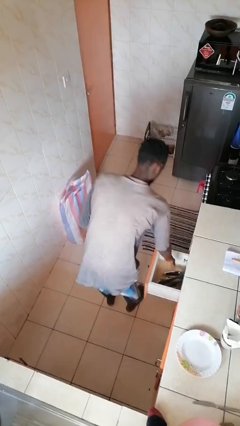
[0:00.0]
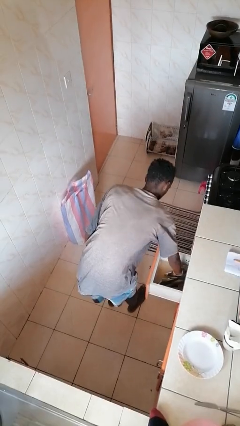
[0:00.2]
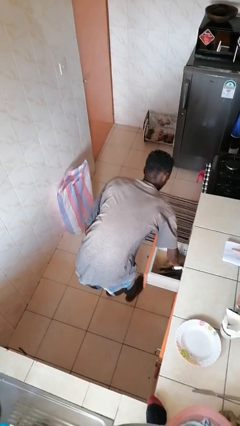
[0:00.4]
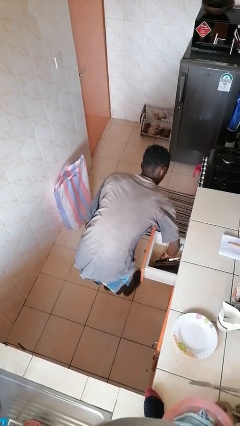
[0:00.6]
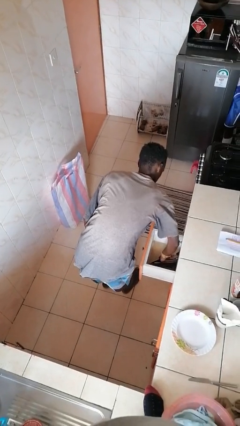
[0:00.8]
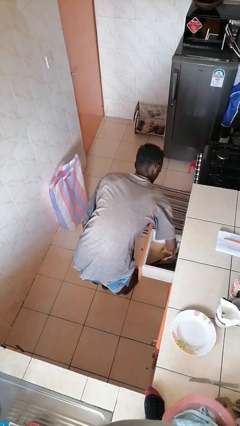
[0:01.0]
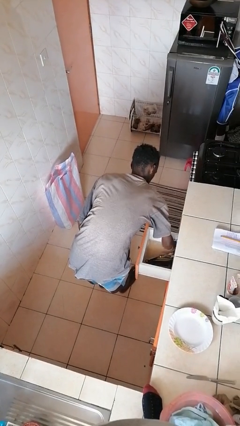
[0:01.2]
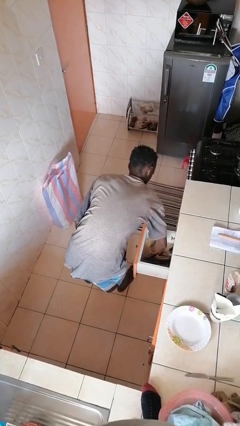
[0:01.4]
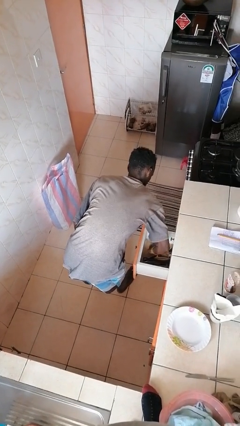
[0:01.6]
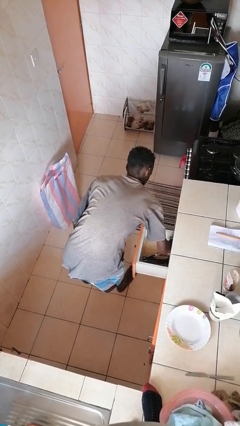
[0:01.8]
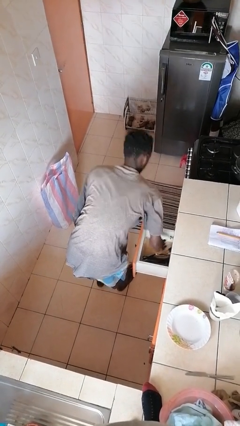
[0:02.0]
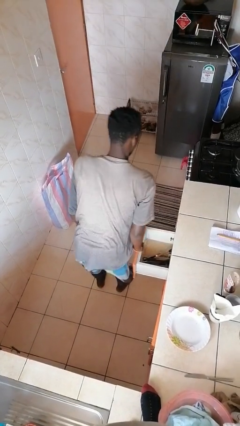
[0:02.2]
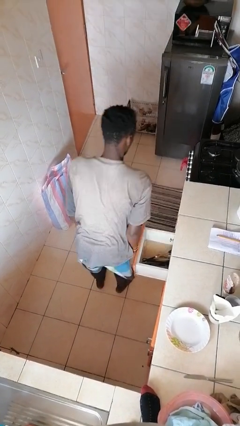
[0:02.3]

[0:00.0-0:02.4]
person searches in kitchen drawer

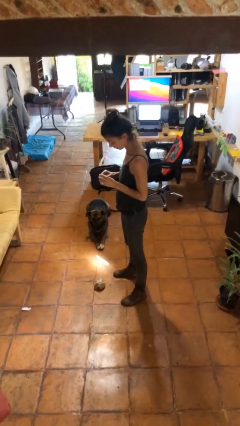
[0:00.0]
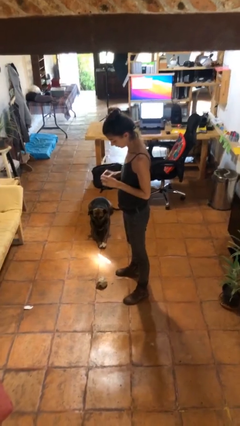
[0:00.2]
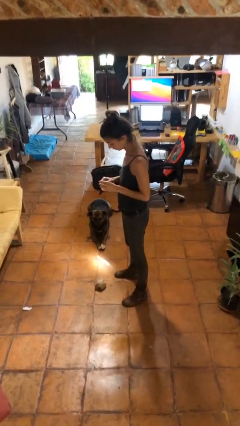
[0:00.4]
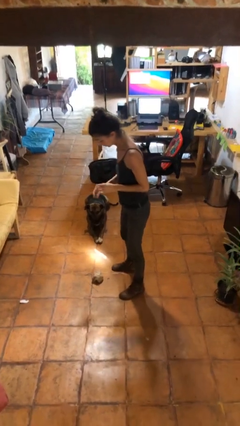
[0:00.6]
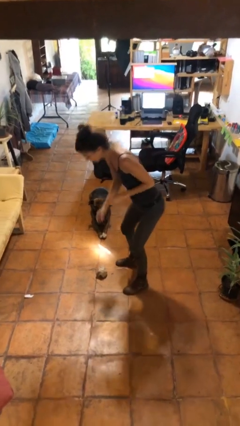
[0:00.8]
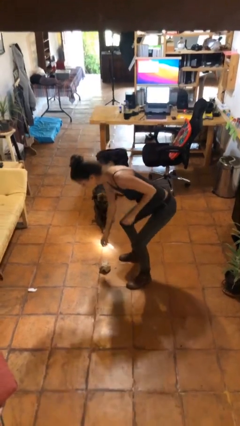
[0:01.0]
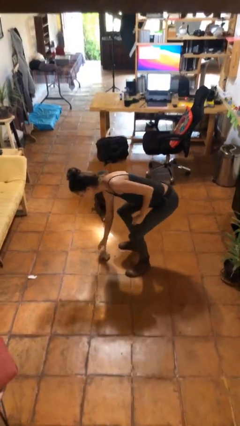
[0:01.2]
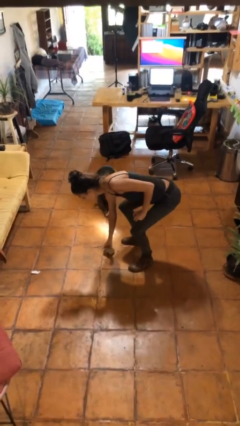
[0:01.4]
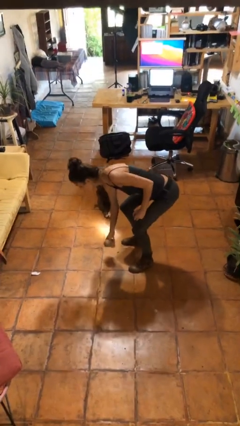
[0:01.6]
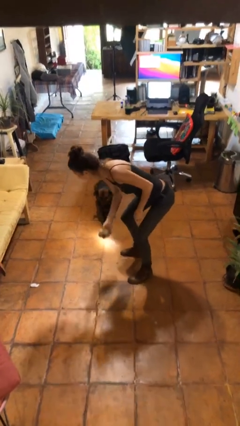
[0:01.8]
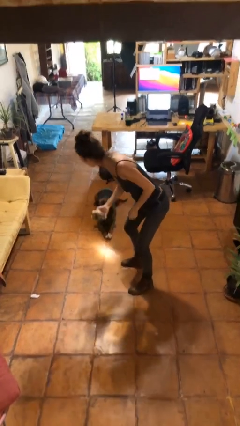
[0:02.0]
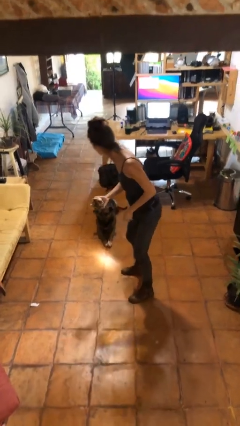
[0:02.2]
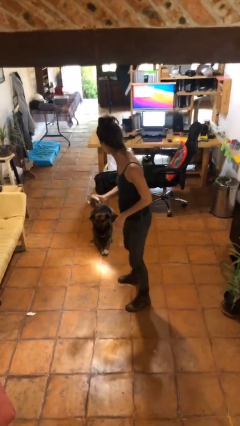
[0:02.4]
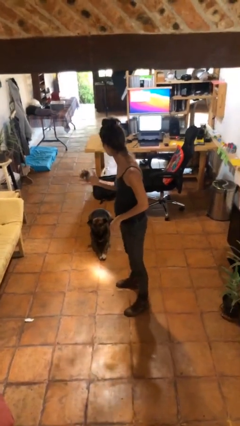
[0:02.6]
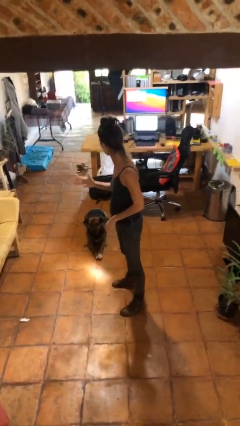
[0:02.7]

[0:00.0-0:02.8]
person picks up object from floor

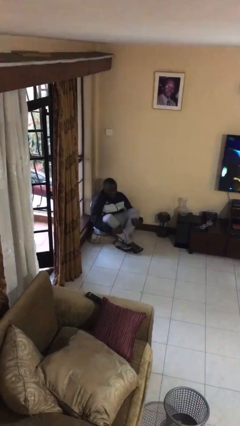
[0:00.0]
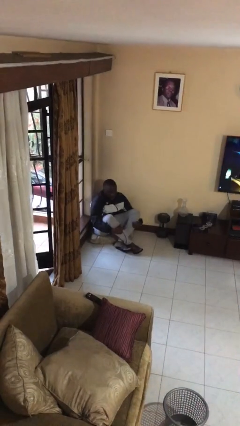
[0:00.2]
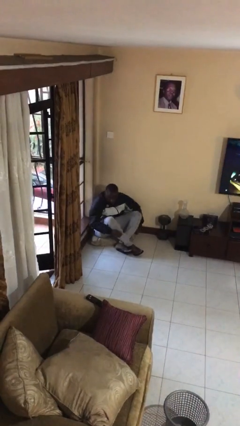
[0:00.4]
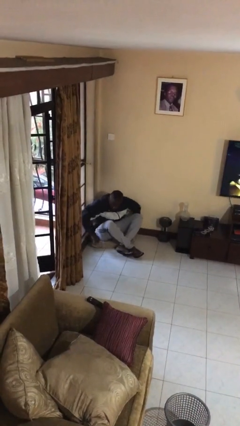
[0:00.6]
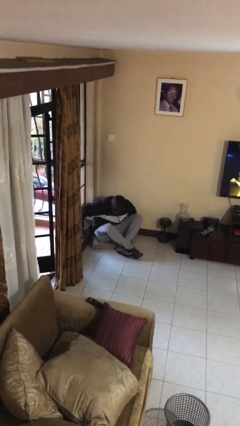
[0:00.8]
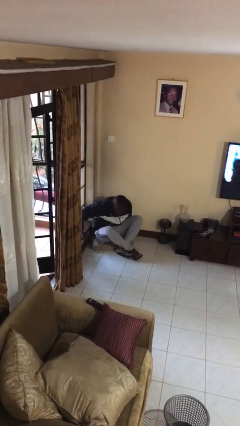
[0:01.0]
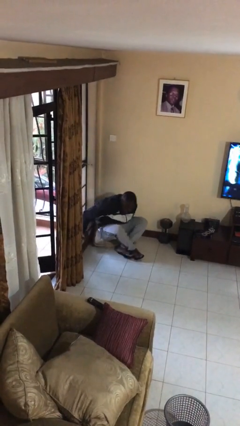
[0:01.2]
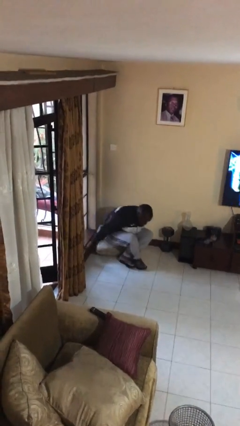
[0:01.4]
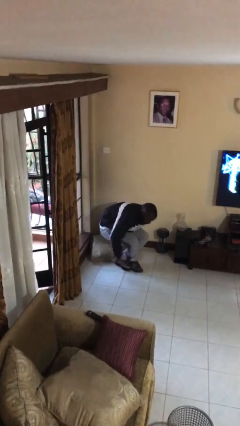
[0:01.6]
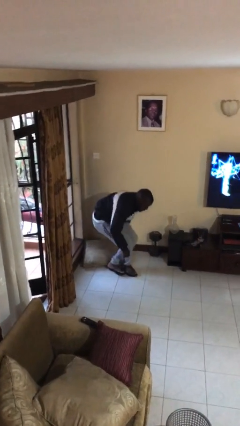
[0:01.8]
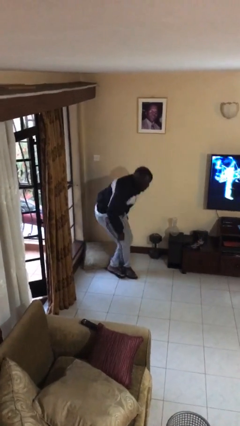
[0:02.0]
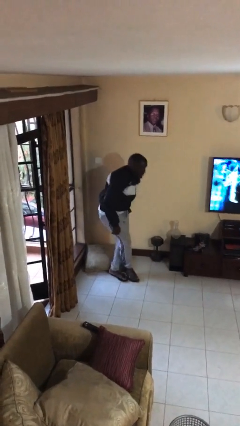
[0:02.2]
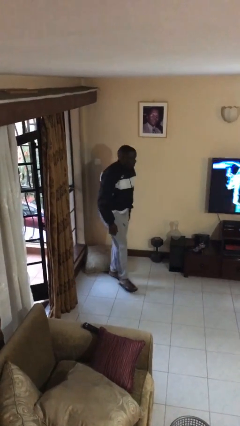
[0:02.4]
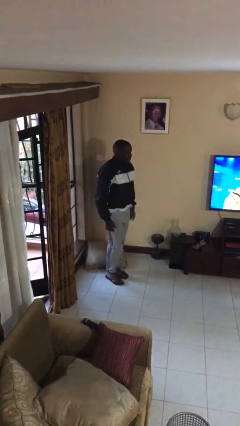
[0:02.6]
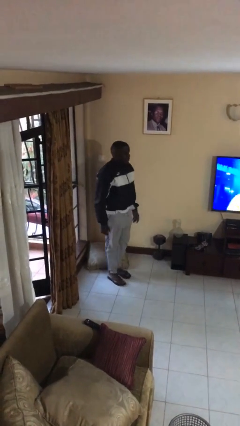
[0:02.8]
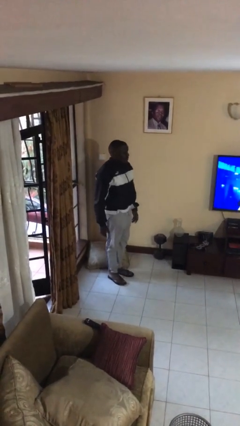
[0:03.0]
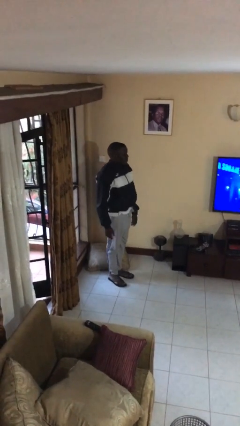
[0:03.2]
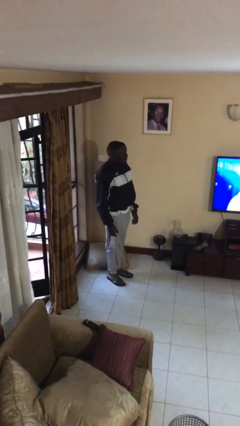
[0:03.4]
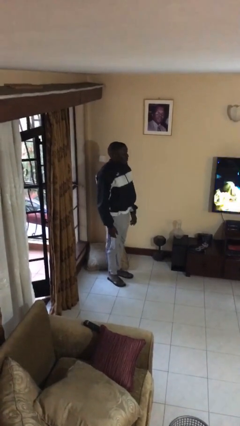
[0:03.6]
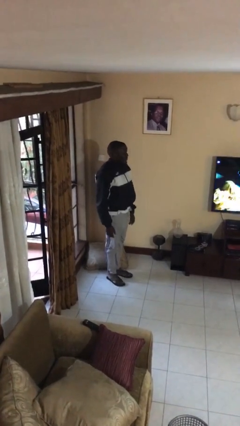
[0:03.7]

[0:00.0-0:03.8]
person stands up from floor

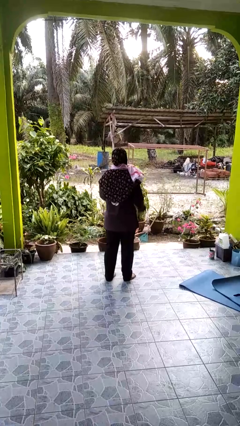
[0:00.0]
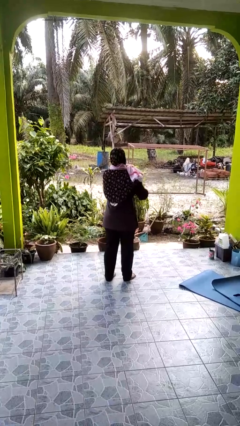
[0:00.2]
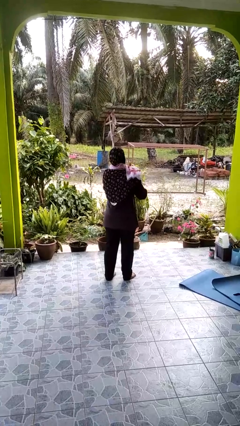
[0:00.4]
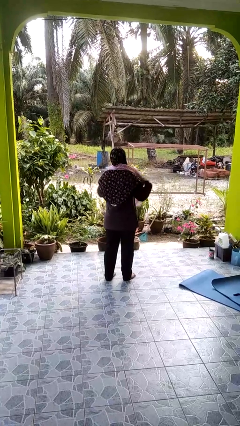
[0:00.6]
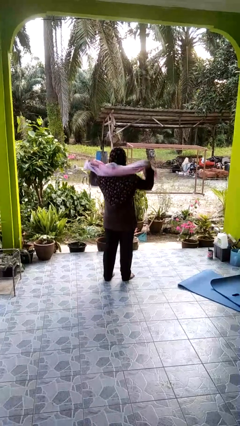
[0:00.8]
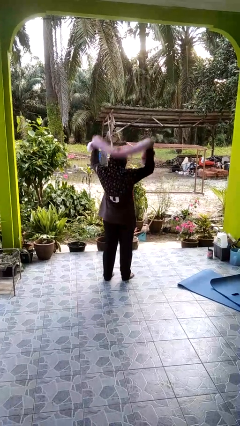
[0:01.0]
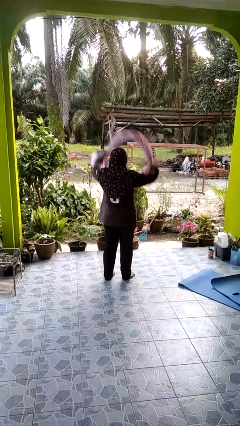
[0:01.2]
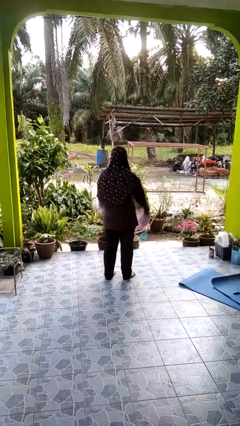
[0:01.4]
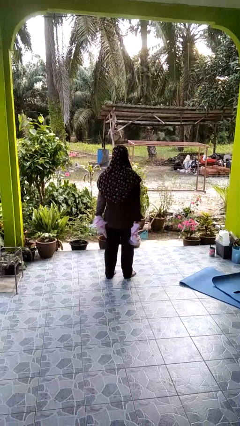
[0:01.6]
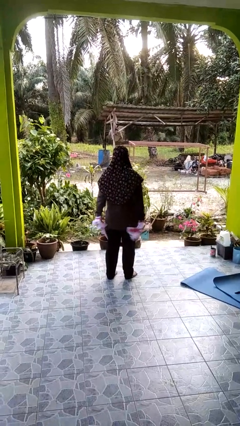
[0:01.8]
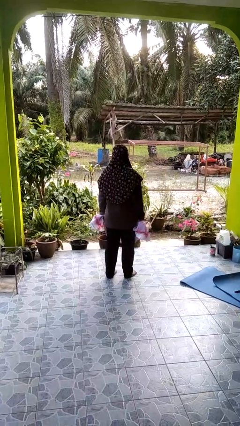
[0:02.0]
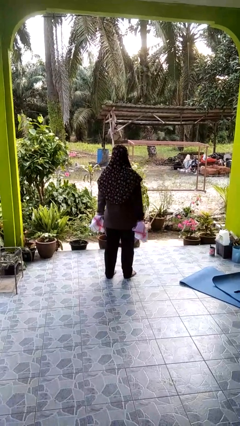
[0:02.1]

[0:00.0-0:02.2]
person takes off scarf

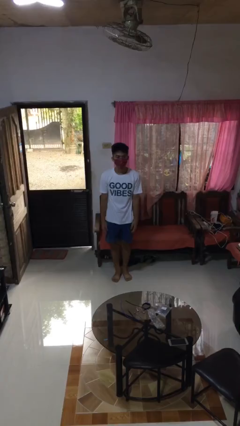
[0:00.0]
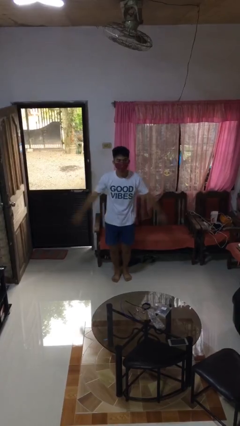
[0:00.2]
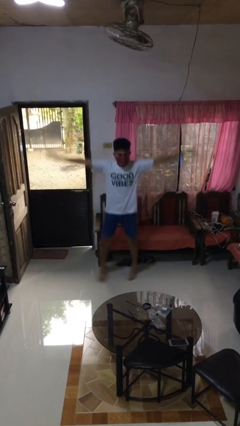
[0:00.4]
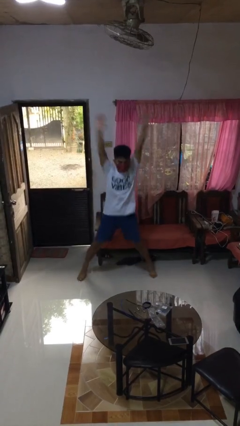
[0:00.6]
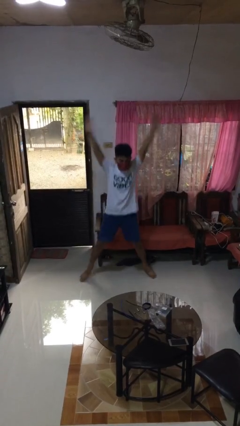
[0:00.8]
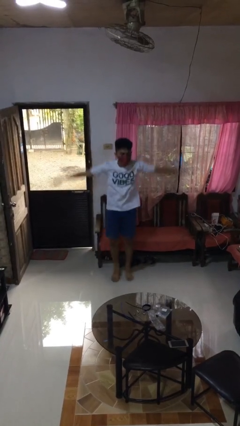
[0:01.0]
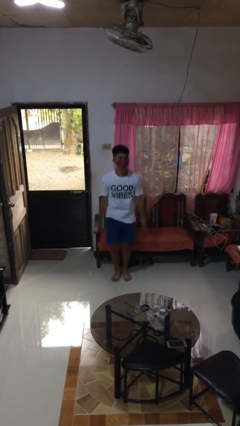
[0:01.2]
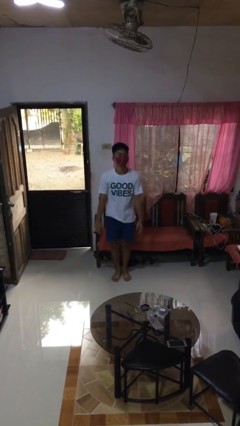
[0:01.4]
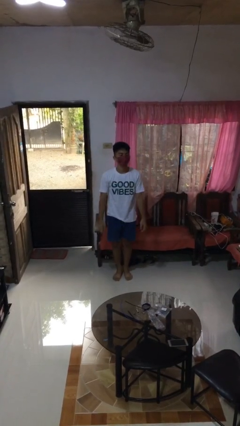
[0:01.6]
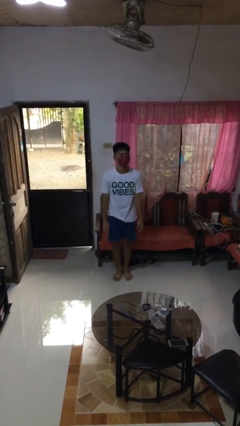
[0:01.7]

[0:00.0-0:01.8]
person exercises with jumping jacks

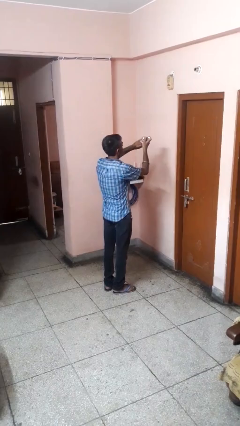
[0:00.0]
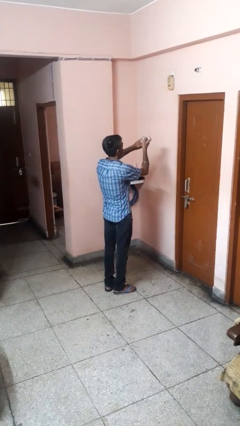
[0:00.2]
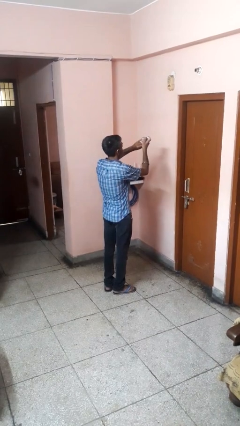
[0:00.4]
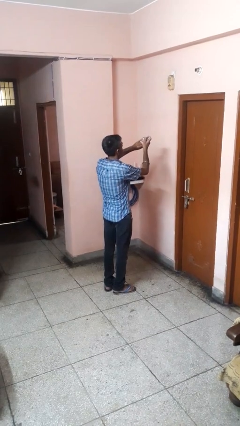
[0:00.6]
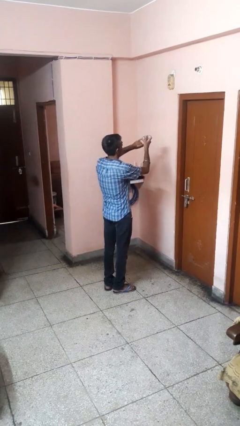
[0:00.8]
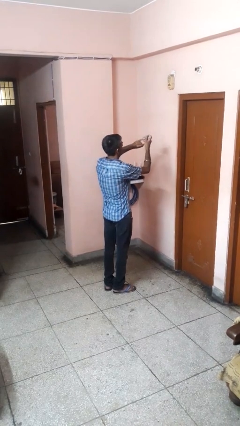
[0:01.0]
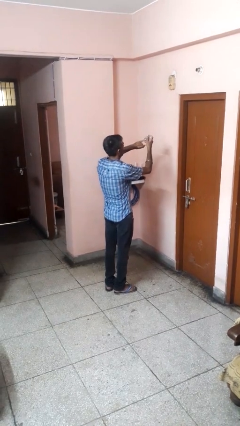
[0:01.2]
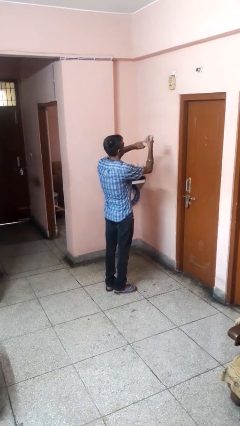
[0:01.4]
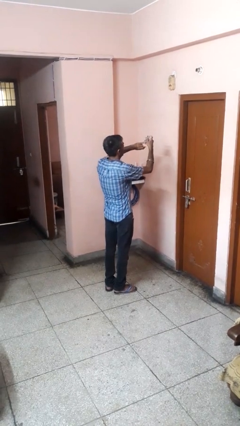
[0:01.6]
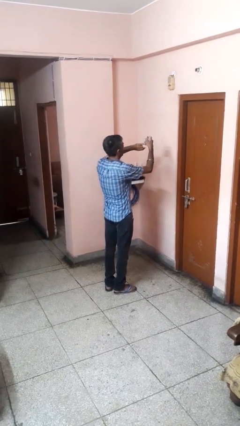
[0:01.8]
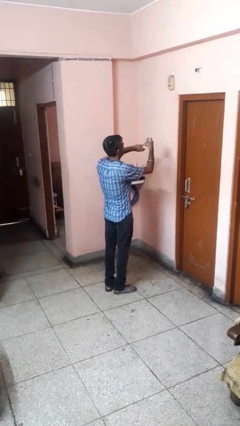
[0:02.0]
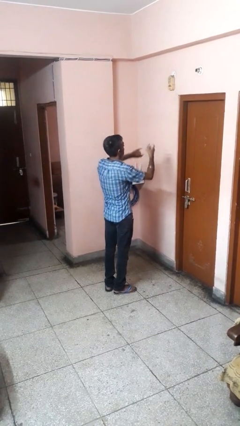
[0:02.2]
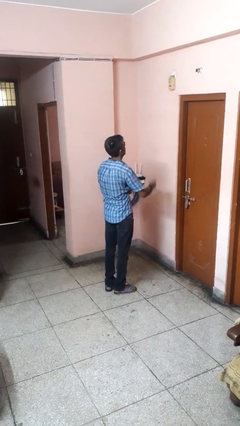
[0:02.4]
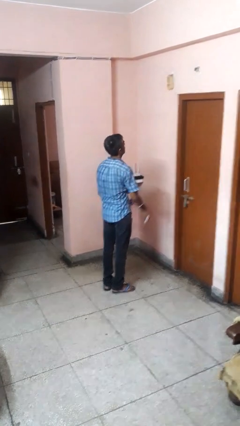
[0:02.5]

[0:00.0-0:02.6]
person clips fingernails

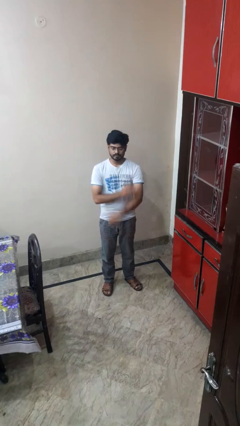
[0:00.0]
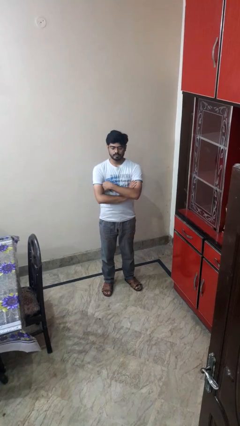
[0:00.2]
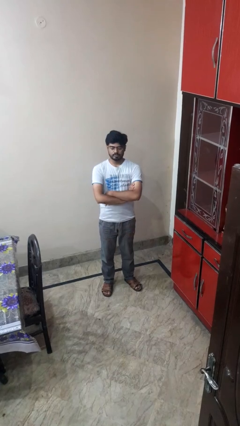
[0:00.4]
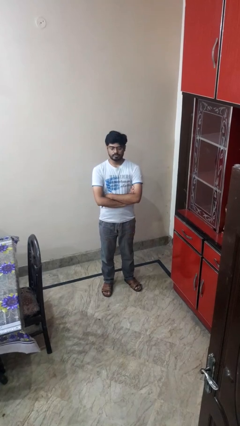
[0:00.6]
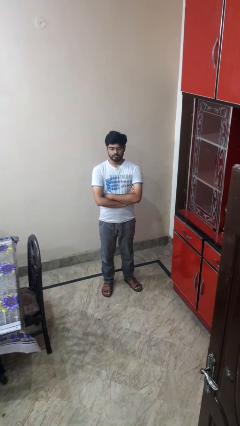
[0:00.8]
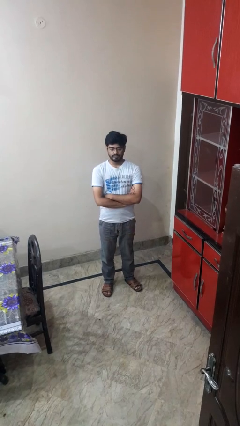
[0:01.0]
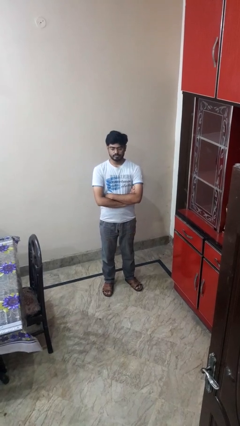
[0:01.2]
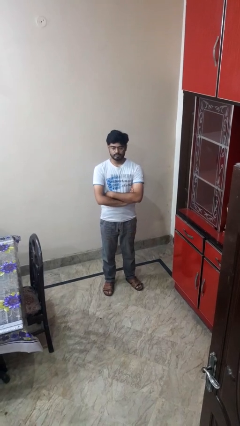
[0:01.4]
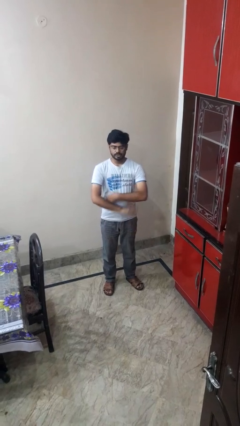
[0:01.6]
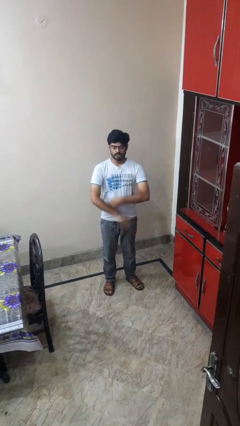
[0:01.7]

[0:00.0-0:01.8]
person crosses arms
